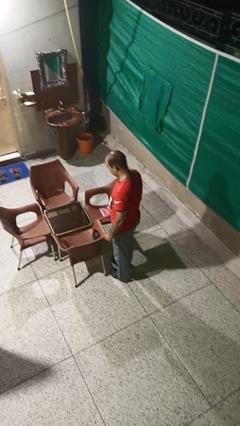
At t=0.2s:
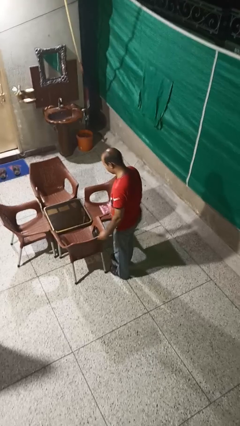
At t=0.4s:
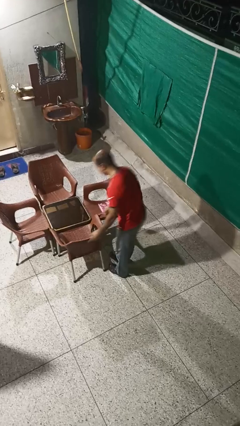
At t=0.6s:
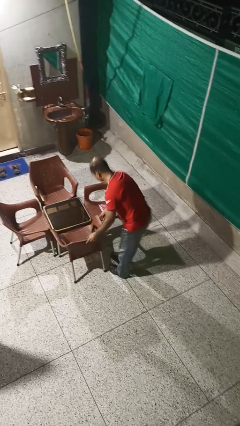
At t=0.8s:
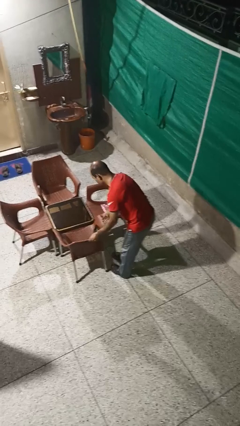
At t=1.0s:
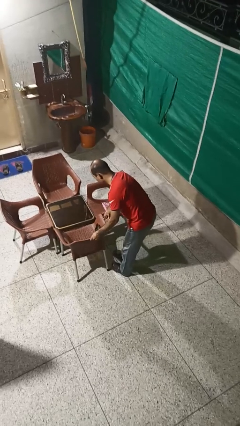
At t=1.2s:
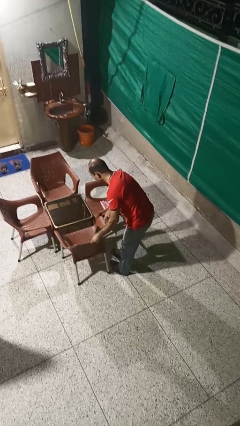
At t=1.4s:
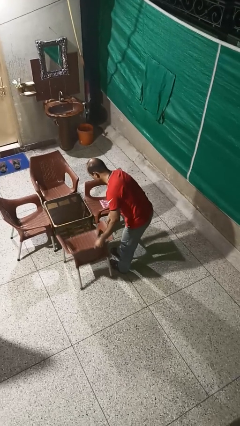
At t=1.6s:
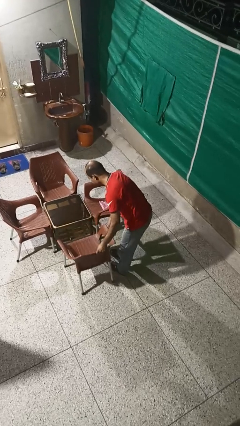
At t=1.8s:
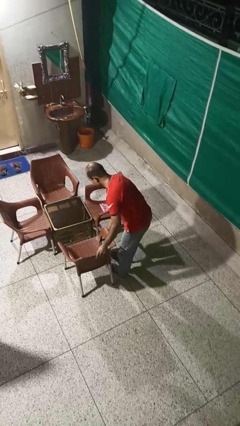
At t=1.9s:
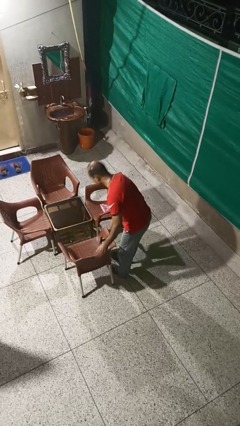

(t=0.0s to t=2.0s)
person pulls out chair

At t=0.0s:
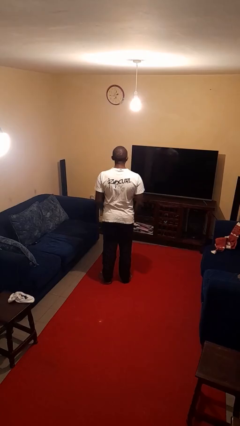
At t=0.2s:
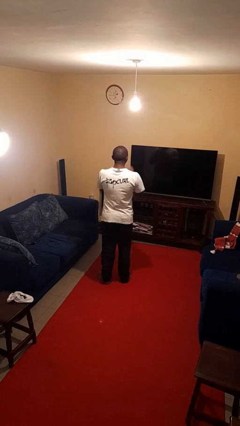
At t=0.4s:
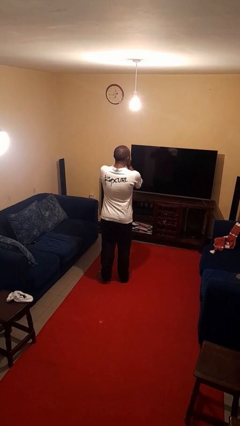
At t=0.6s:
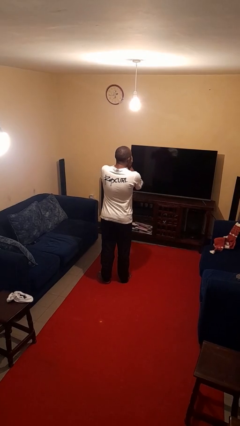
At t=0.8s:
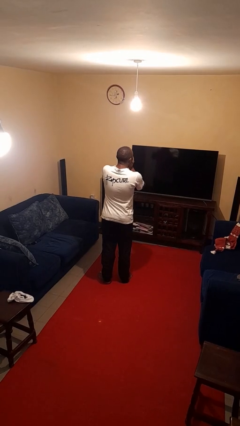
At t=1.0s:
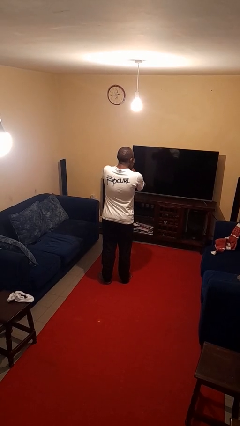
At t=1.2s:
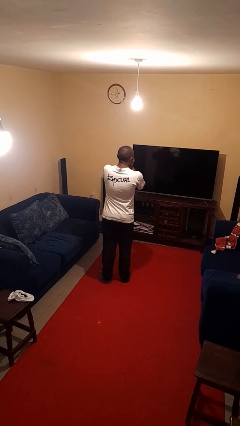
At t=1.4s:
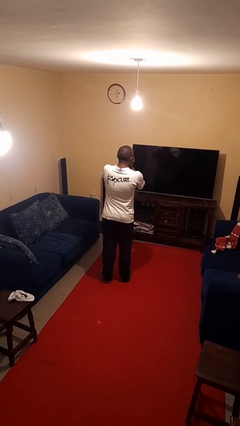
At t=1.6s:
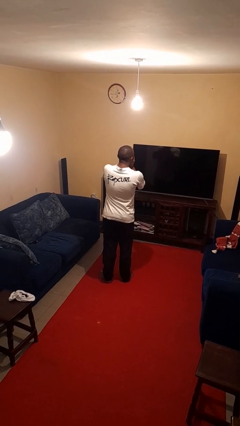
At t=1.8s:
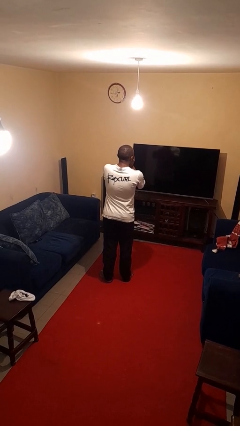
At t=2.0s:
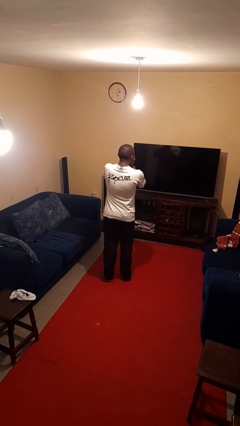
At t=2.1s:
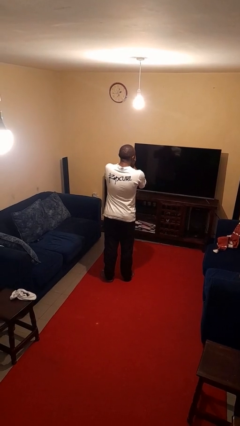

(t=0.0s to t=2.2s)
person sneezes into hand

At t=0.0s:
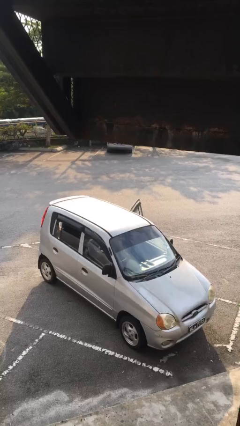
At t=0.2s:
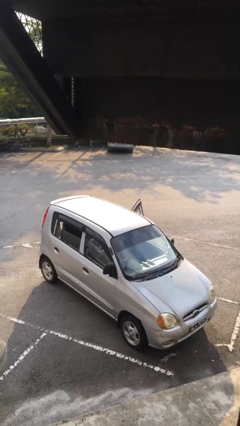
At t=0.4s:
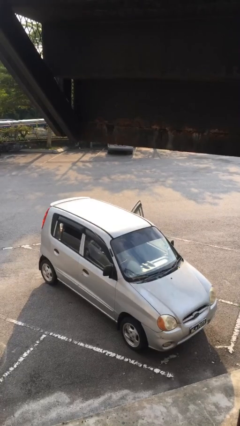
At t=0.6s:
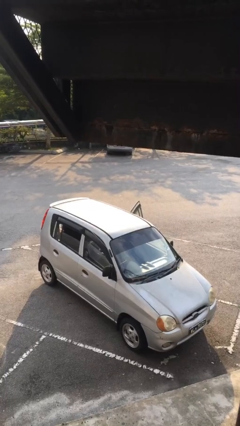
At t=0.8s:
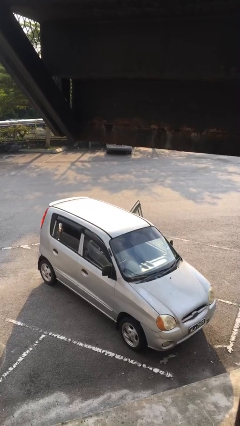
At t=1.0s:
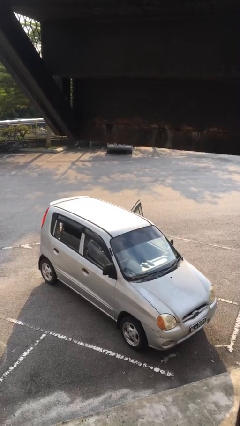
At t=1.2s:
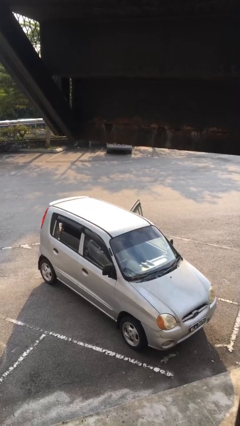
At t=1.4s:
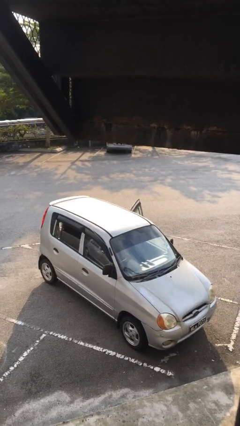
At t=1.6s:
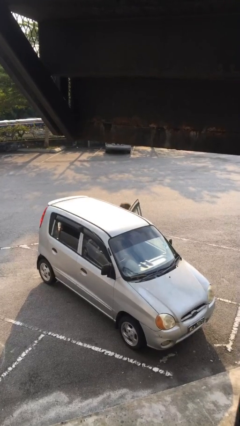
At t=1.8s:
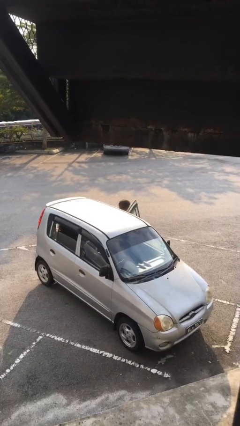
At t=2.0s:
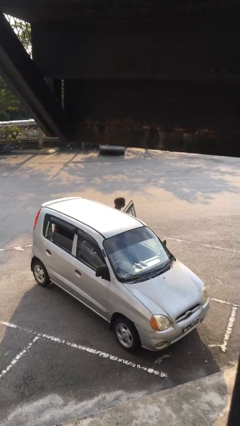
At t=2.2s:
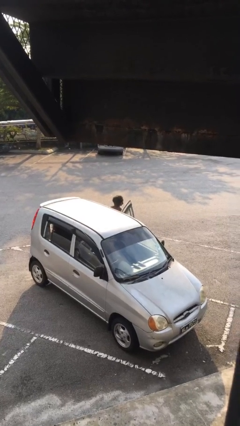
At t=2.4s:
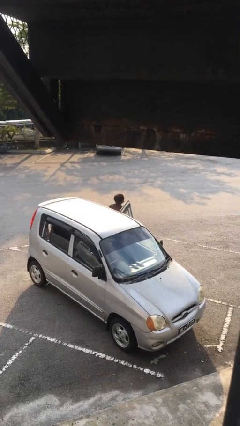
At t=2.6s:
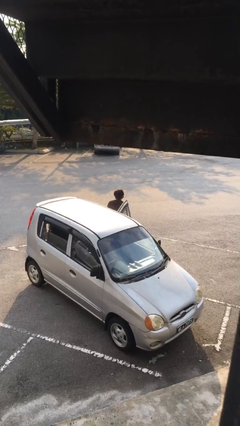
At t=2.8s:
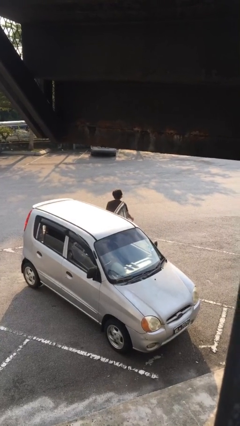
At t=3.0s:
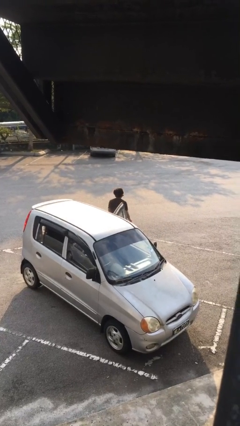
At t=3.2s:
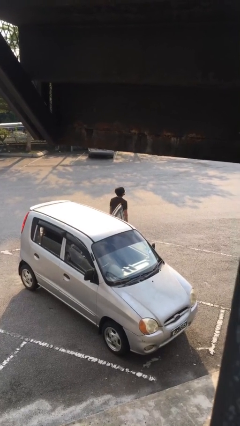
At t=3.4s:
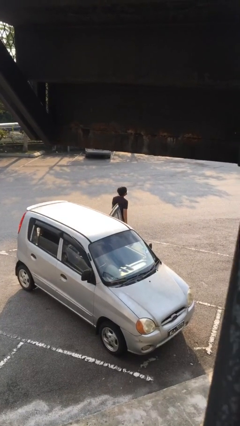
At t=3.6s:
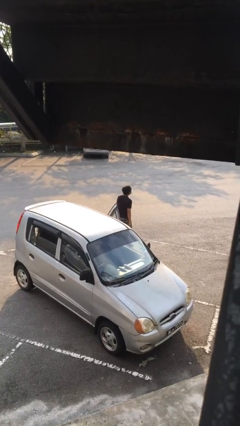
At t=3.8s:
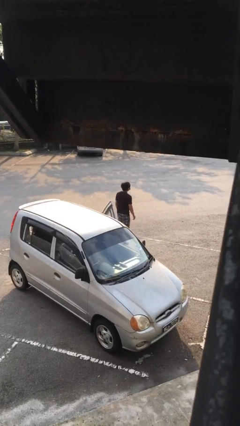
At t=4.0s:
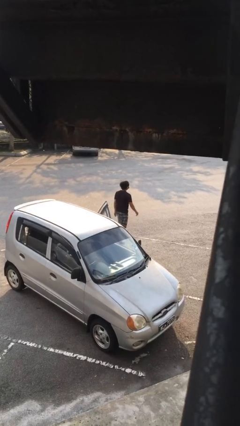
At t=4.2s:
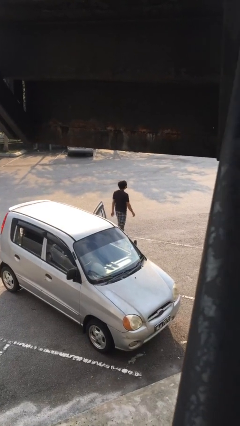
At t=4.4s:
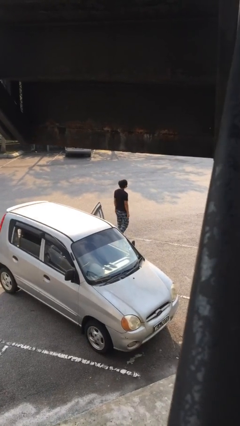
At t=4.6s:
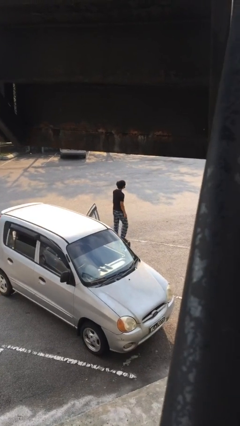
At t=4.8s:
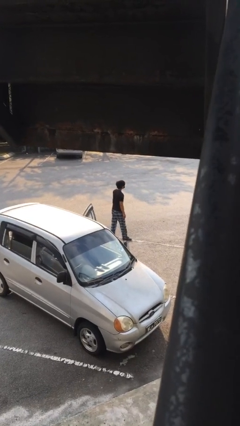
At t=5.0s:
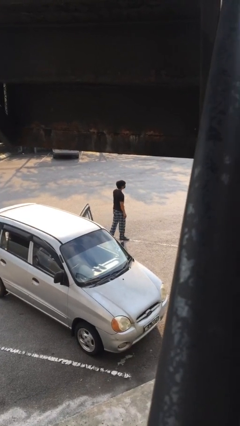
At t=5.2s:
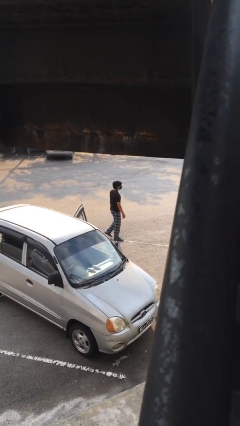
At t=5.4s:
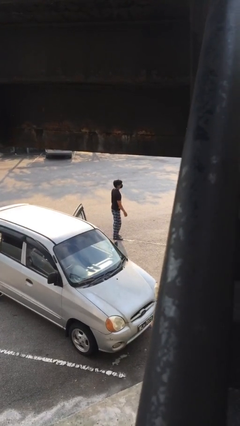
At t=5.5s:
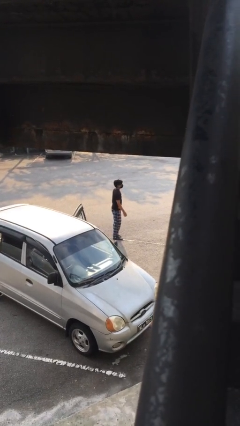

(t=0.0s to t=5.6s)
person exits car

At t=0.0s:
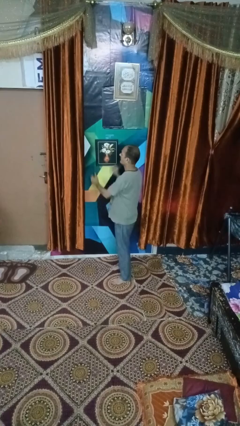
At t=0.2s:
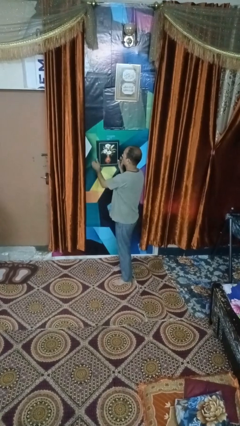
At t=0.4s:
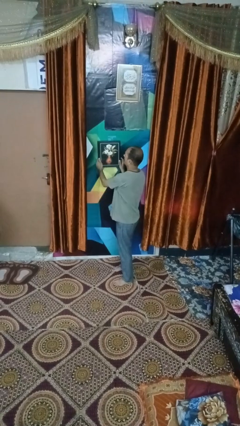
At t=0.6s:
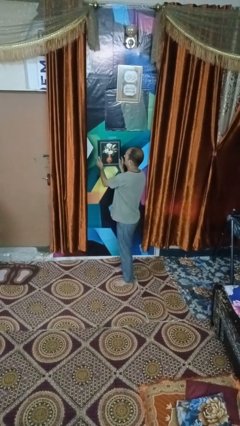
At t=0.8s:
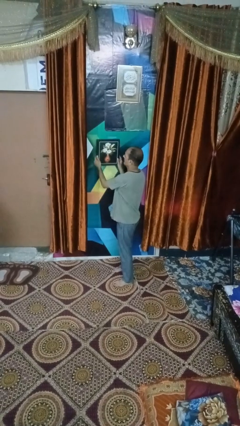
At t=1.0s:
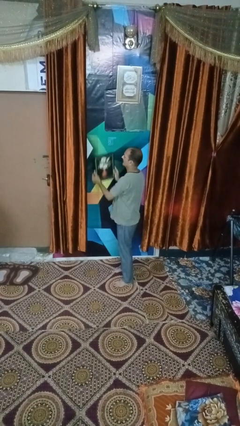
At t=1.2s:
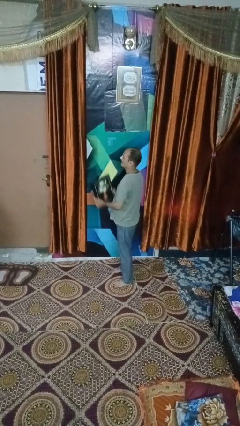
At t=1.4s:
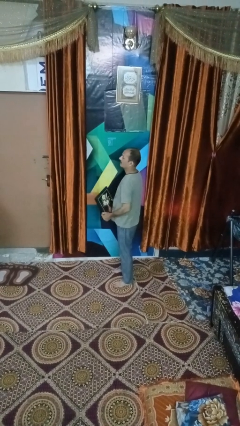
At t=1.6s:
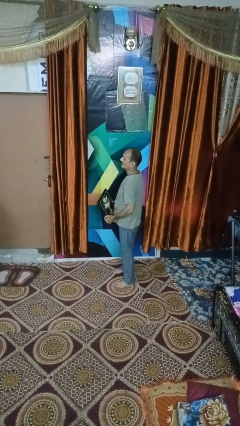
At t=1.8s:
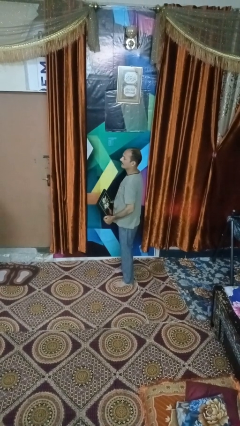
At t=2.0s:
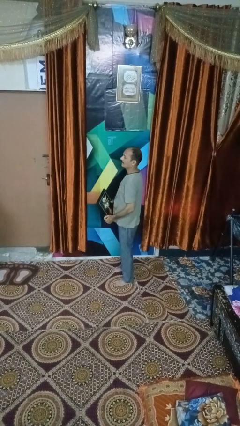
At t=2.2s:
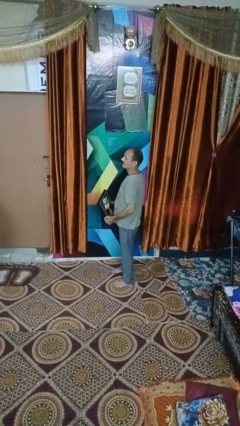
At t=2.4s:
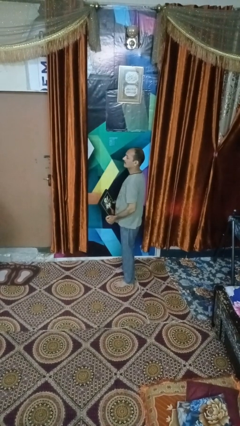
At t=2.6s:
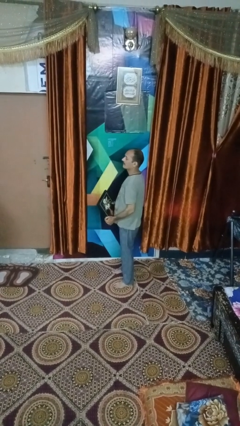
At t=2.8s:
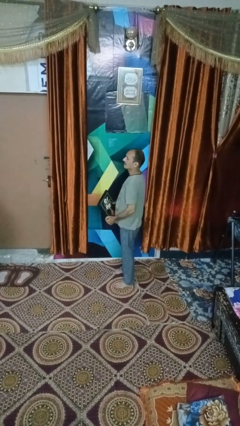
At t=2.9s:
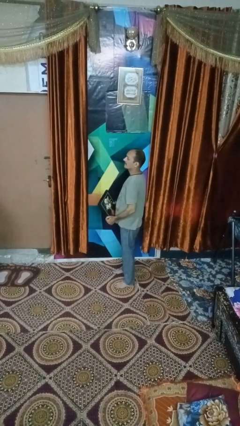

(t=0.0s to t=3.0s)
person takes down picture frame

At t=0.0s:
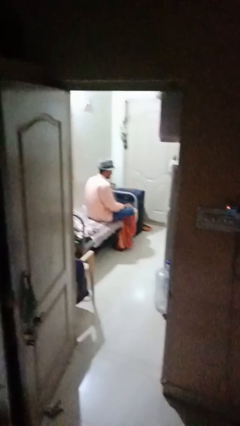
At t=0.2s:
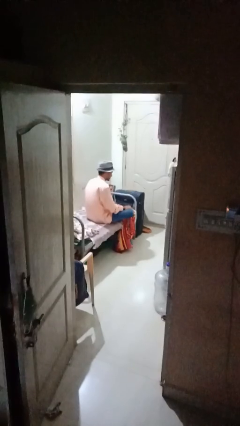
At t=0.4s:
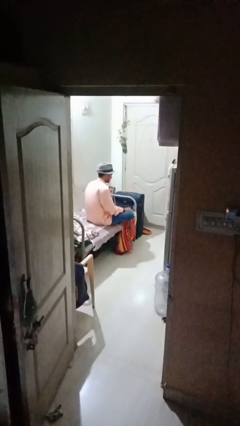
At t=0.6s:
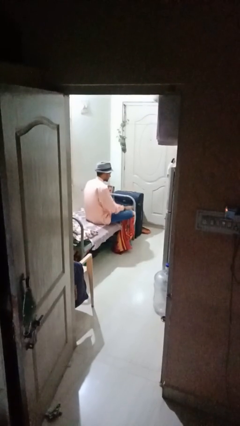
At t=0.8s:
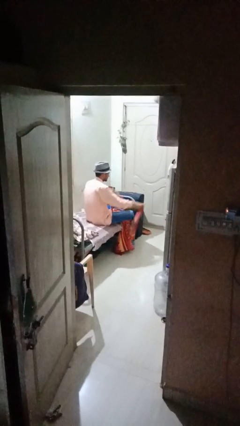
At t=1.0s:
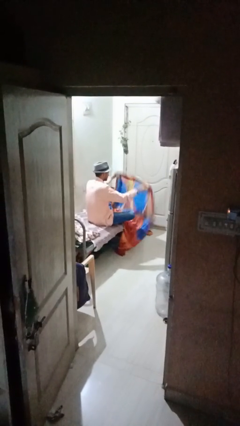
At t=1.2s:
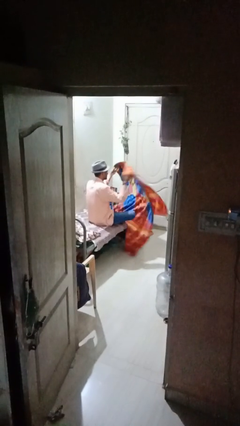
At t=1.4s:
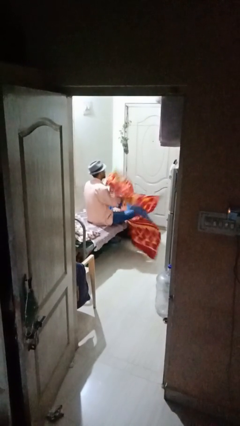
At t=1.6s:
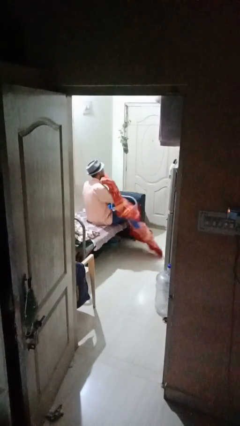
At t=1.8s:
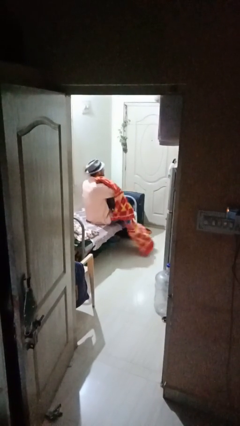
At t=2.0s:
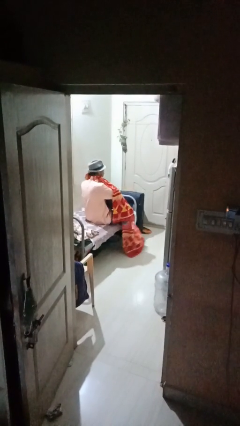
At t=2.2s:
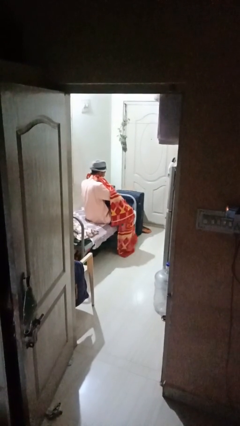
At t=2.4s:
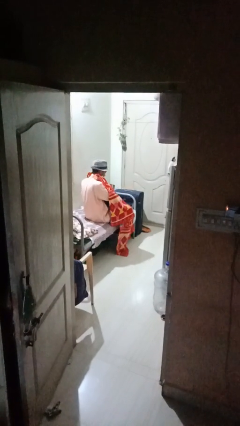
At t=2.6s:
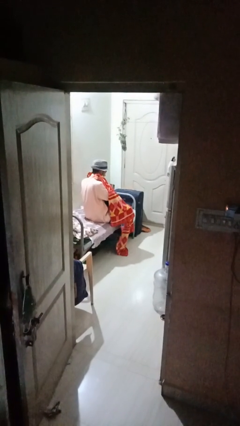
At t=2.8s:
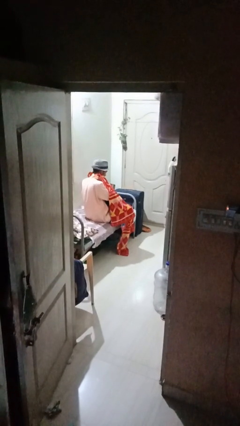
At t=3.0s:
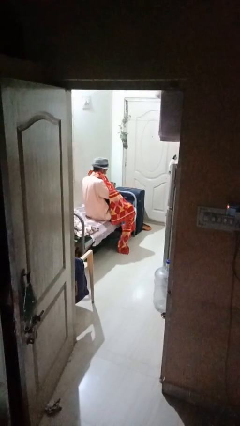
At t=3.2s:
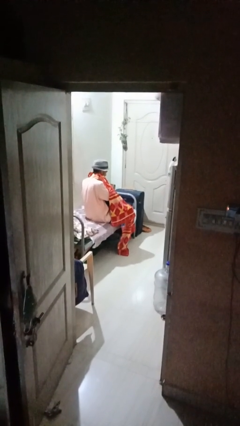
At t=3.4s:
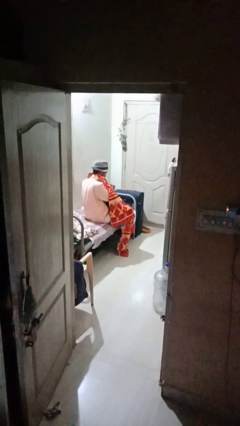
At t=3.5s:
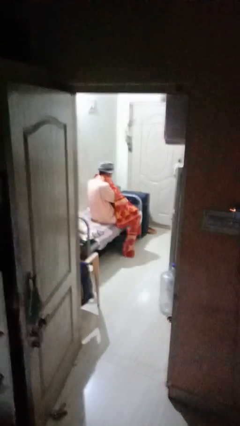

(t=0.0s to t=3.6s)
person covers with blanket

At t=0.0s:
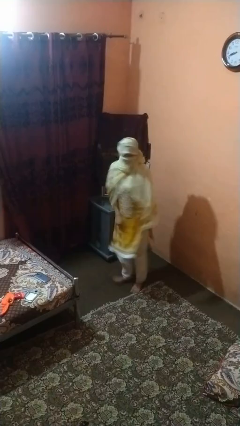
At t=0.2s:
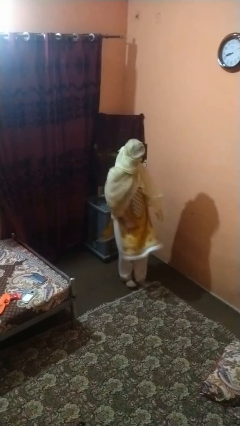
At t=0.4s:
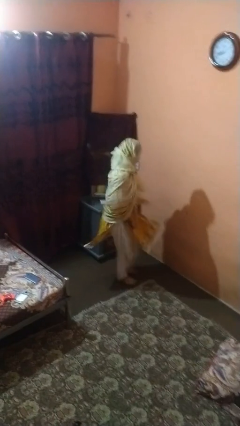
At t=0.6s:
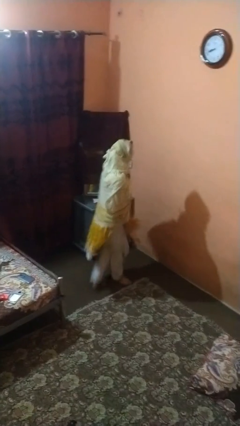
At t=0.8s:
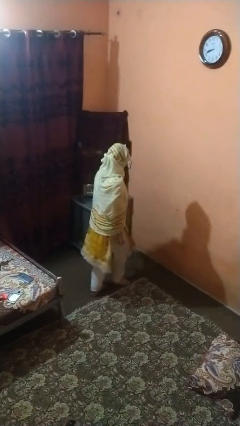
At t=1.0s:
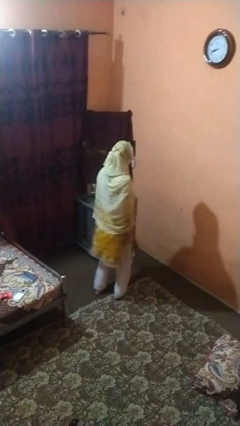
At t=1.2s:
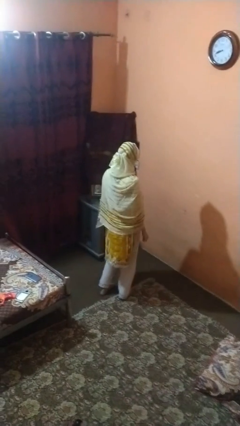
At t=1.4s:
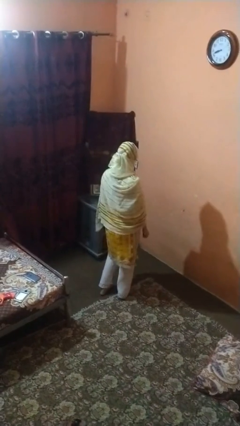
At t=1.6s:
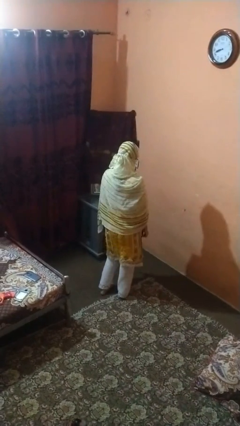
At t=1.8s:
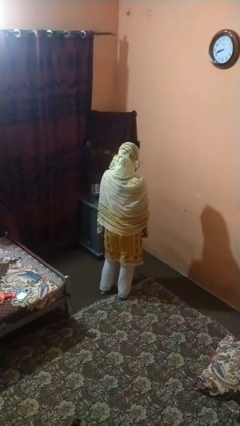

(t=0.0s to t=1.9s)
person twirls
